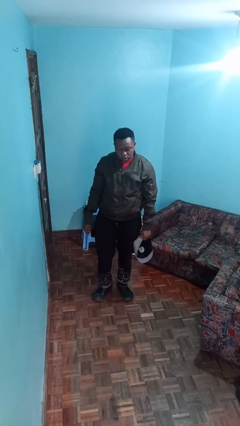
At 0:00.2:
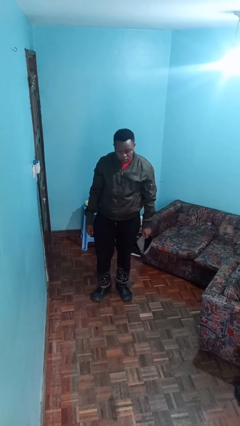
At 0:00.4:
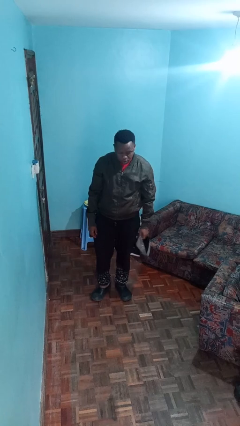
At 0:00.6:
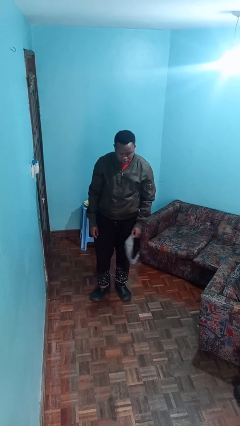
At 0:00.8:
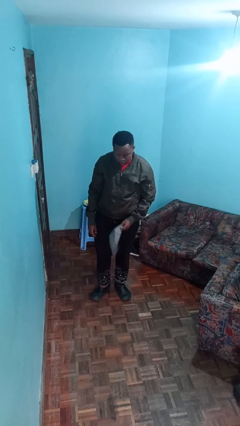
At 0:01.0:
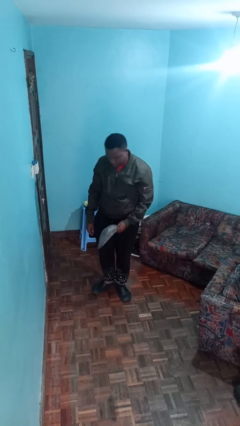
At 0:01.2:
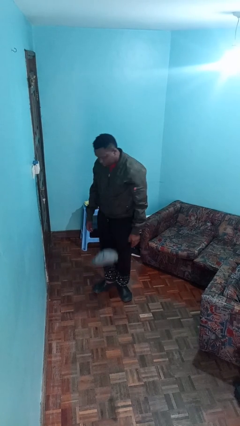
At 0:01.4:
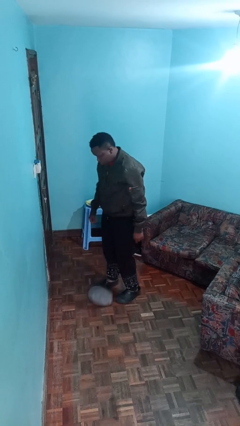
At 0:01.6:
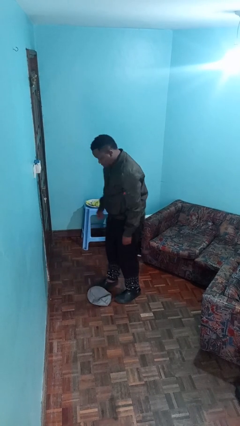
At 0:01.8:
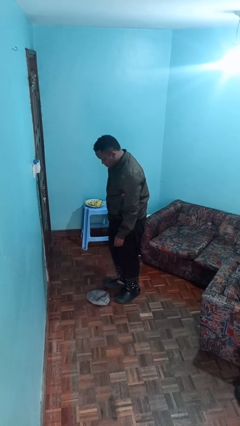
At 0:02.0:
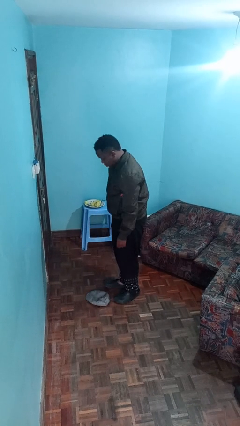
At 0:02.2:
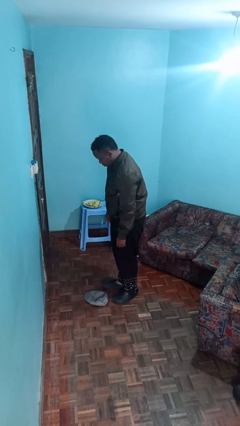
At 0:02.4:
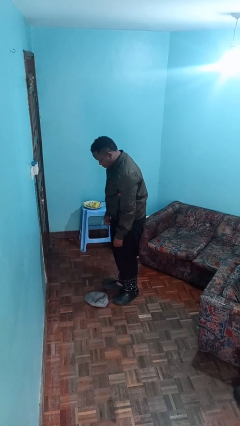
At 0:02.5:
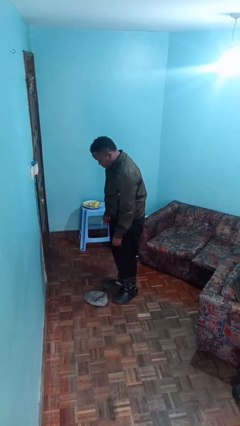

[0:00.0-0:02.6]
person drops object

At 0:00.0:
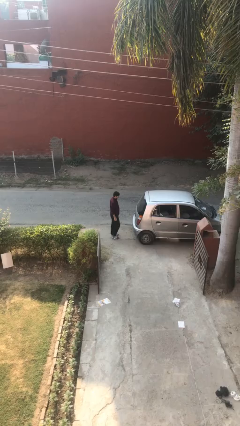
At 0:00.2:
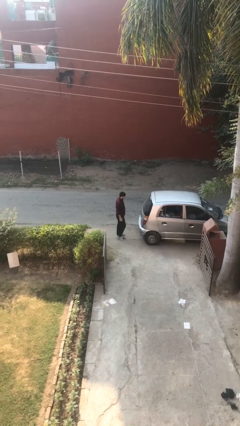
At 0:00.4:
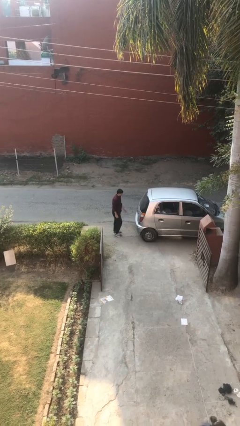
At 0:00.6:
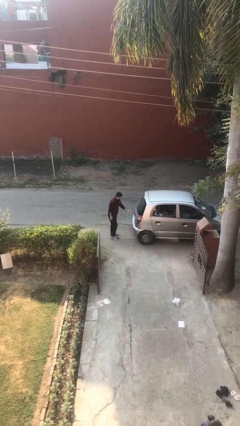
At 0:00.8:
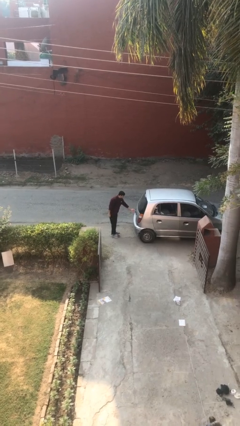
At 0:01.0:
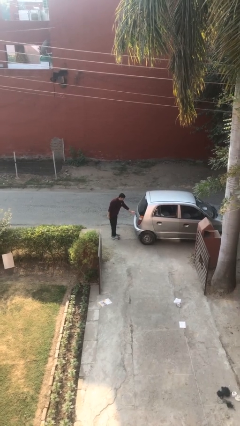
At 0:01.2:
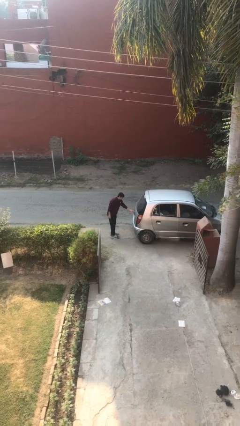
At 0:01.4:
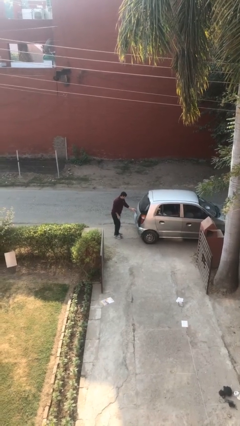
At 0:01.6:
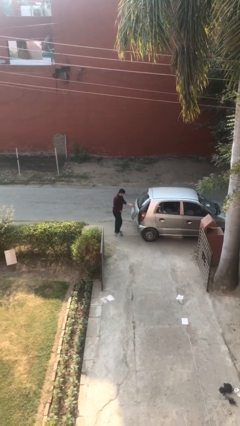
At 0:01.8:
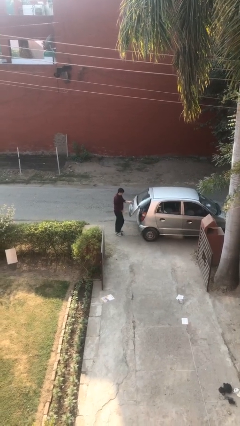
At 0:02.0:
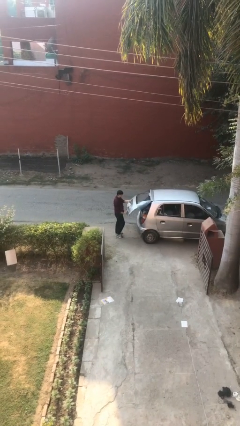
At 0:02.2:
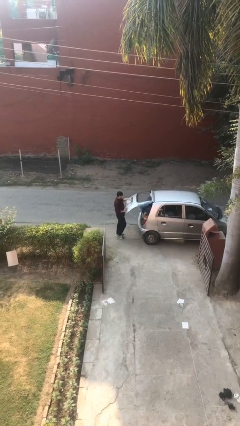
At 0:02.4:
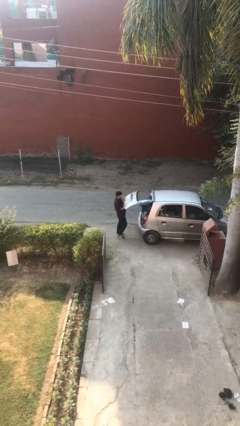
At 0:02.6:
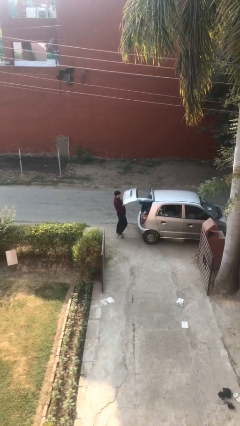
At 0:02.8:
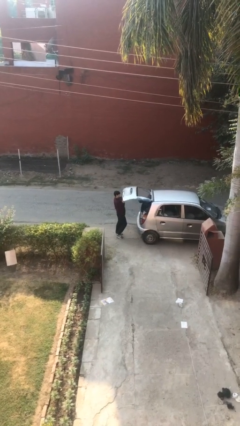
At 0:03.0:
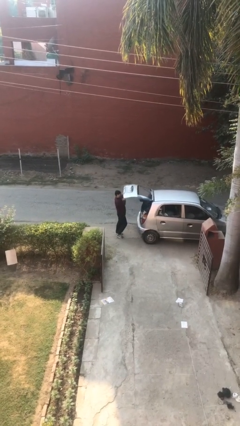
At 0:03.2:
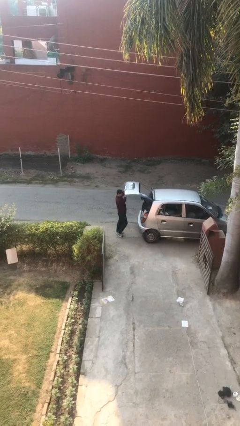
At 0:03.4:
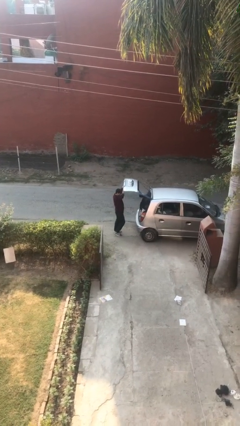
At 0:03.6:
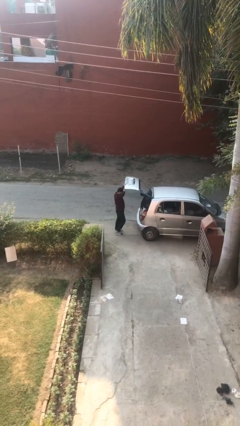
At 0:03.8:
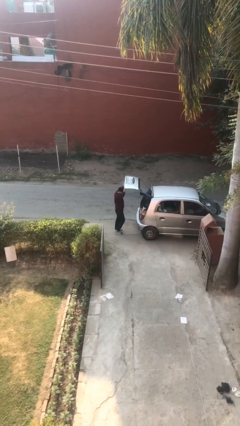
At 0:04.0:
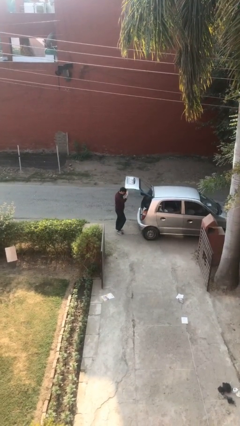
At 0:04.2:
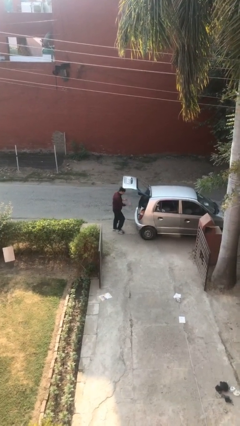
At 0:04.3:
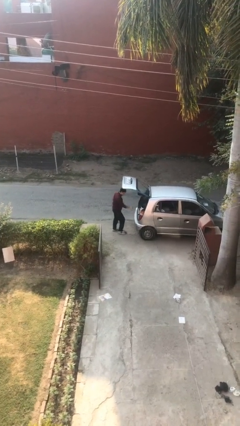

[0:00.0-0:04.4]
person opens car trunk

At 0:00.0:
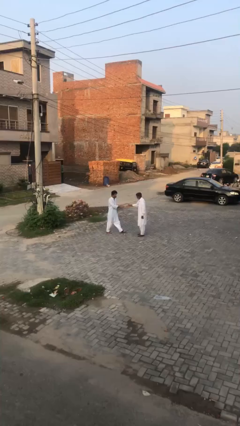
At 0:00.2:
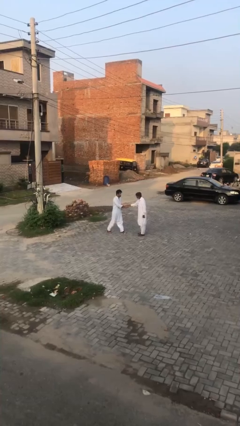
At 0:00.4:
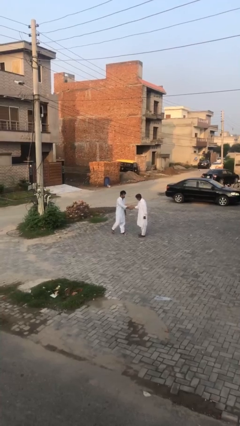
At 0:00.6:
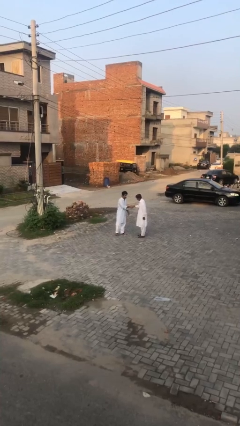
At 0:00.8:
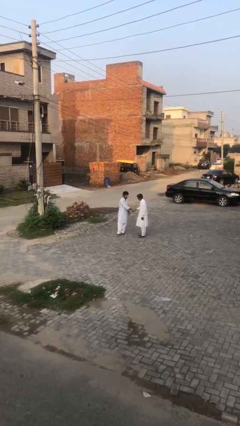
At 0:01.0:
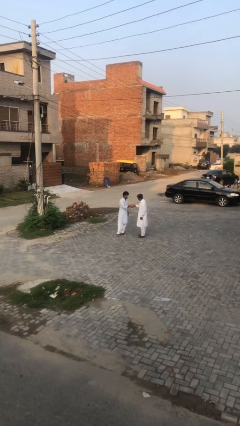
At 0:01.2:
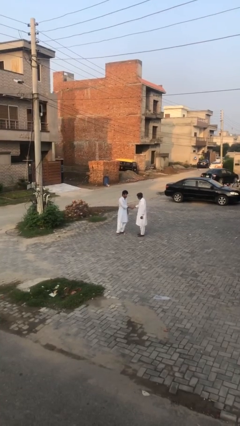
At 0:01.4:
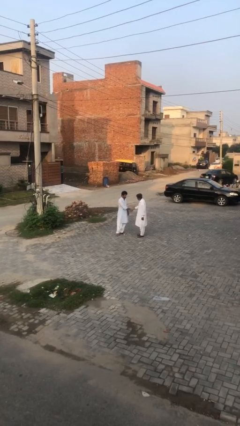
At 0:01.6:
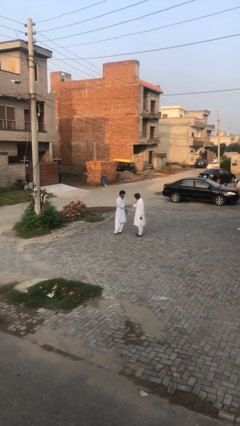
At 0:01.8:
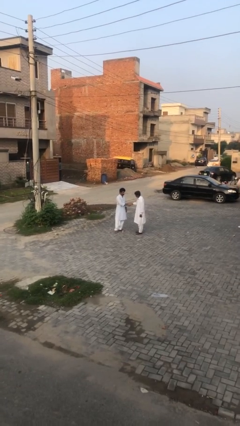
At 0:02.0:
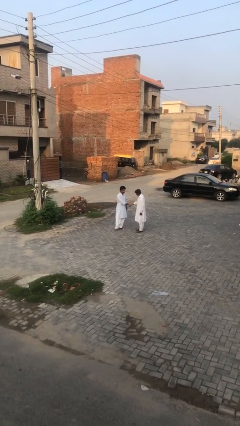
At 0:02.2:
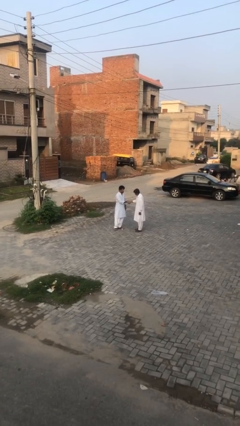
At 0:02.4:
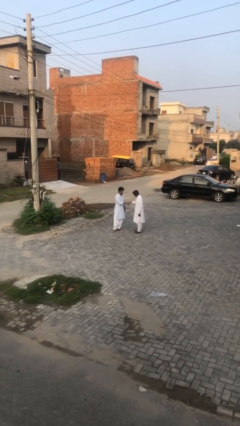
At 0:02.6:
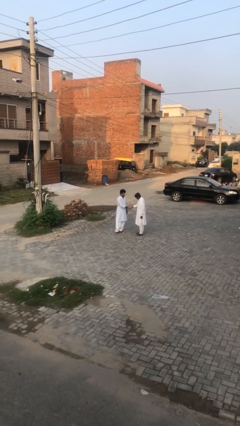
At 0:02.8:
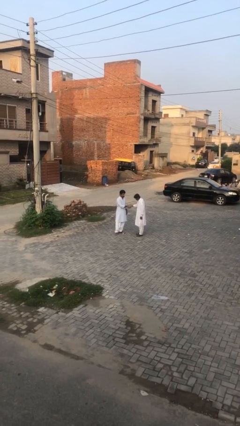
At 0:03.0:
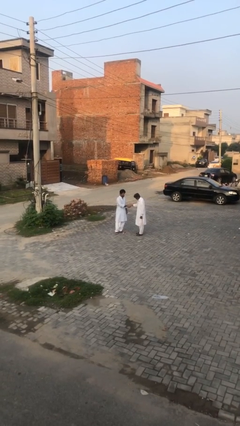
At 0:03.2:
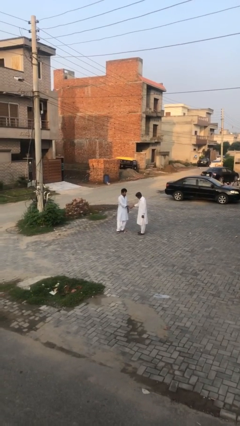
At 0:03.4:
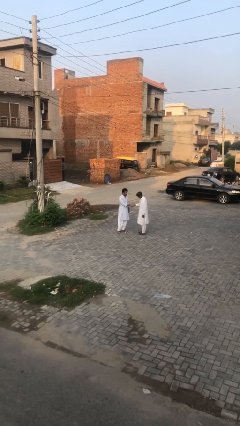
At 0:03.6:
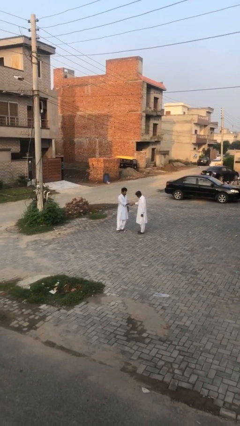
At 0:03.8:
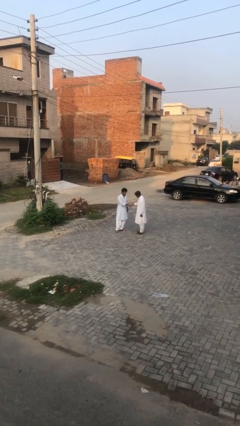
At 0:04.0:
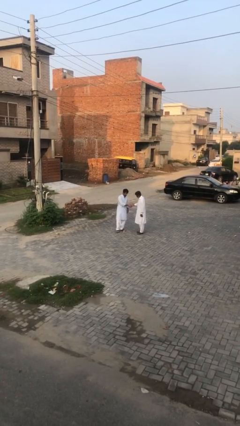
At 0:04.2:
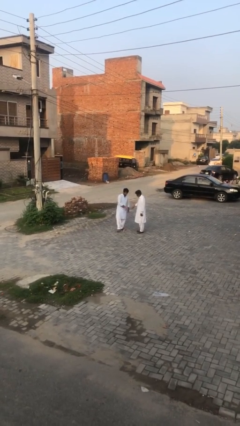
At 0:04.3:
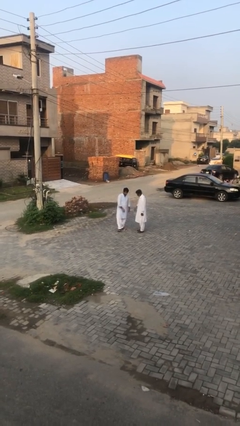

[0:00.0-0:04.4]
person shakes hand

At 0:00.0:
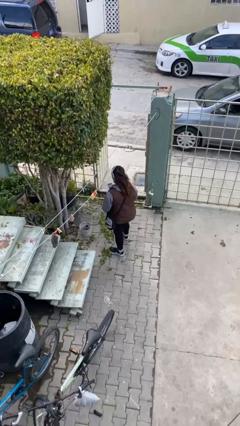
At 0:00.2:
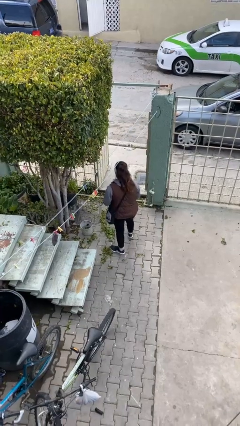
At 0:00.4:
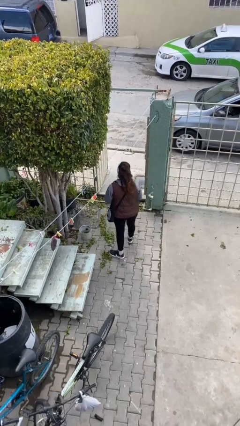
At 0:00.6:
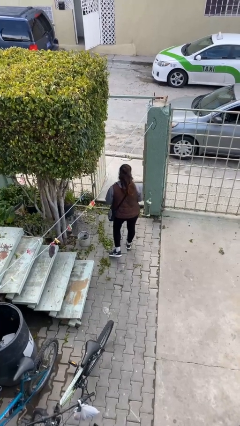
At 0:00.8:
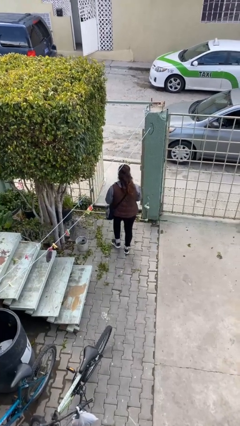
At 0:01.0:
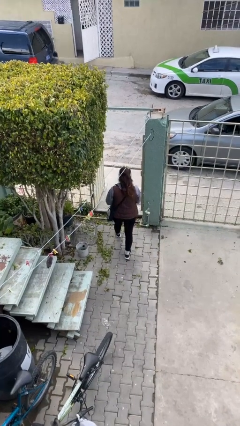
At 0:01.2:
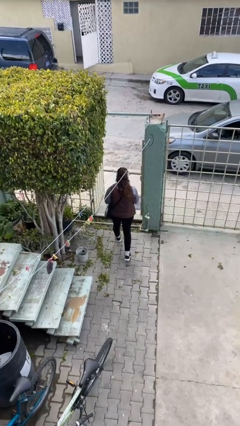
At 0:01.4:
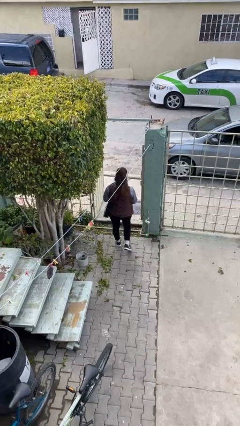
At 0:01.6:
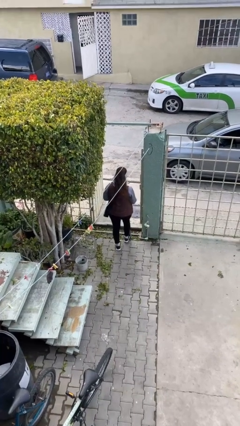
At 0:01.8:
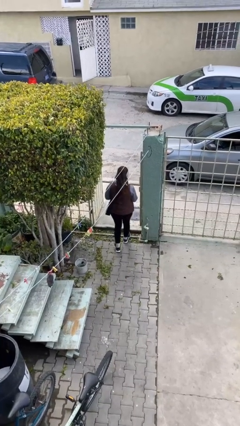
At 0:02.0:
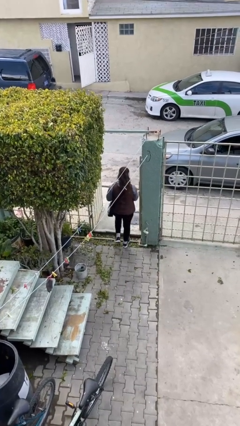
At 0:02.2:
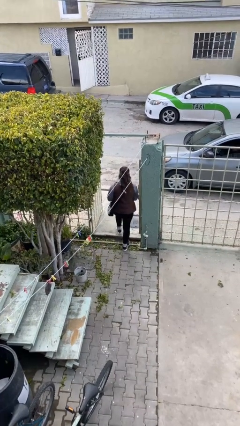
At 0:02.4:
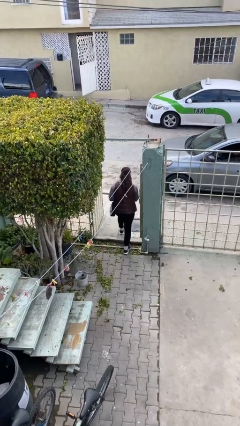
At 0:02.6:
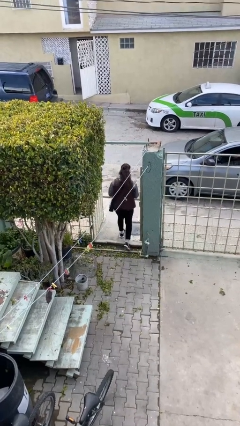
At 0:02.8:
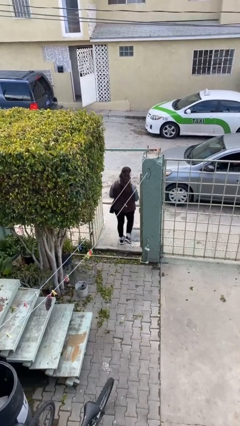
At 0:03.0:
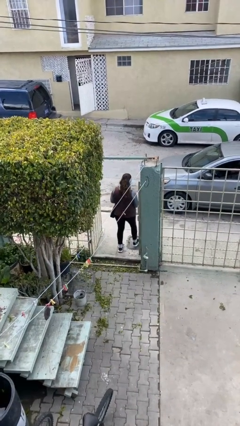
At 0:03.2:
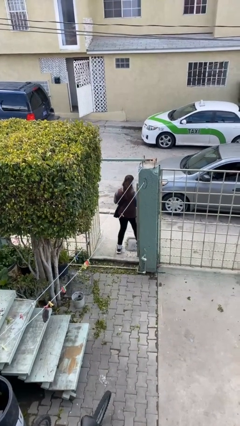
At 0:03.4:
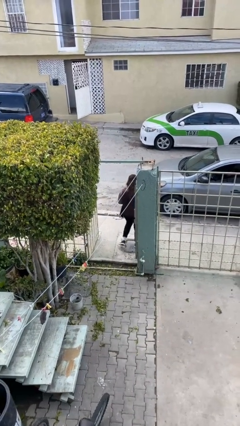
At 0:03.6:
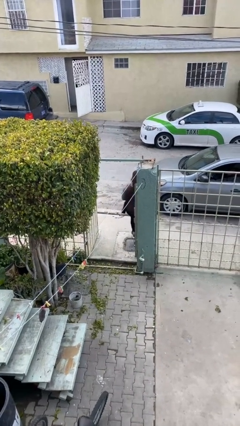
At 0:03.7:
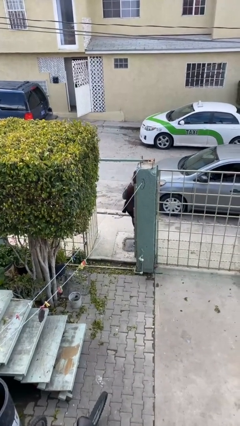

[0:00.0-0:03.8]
person exits scene through structure

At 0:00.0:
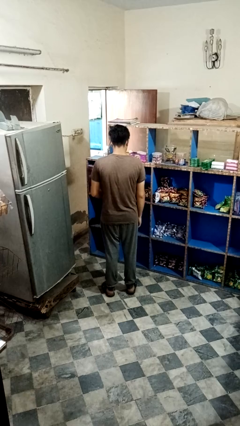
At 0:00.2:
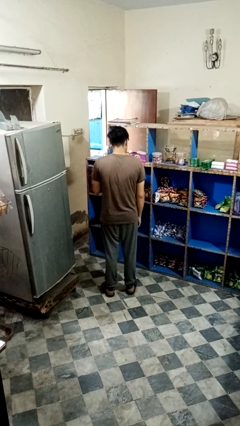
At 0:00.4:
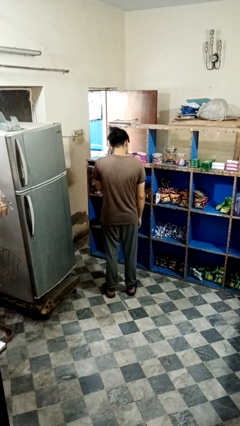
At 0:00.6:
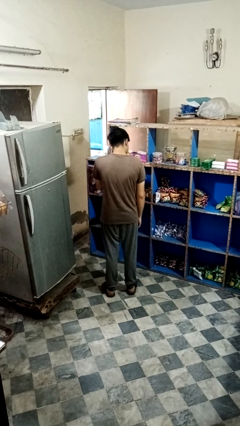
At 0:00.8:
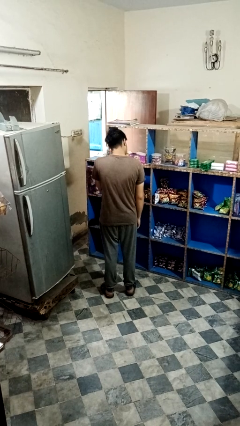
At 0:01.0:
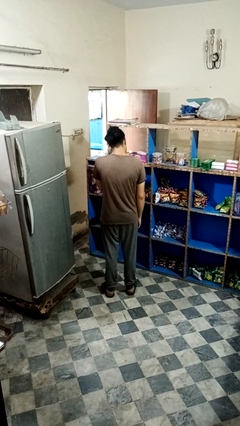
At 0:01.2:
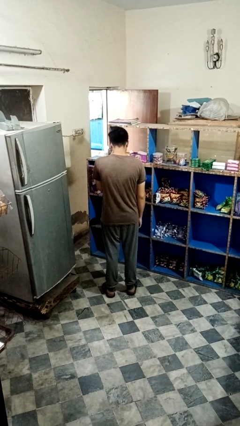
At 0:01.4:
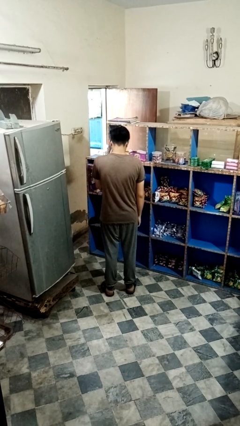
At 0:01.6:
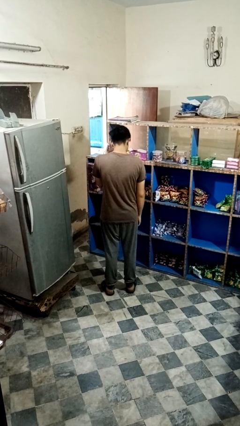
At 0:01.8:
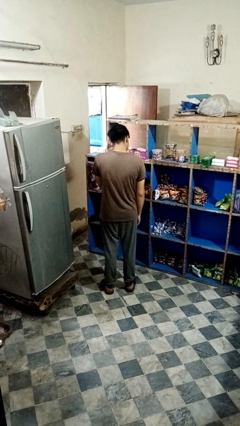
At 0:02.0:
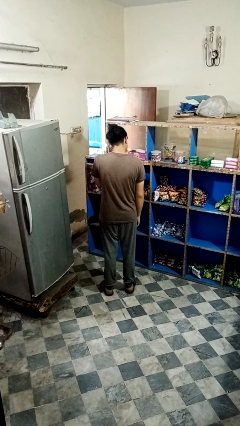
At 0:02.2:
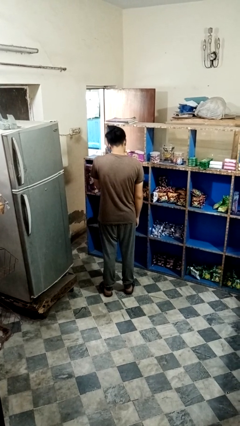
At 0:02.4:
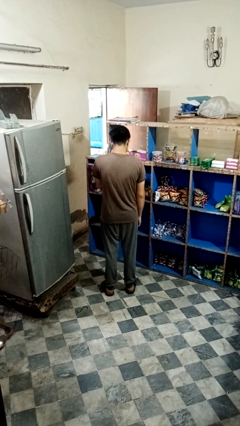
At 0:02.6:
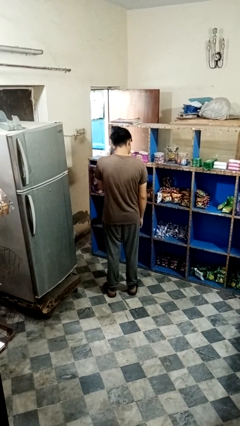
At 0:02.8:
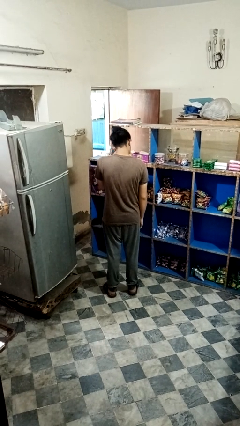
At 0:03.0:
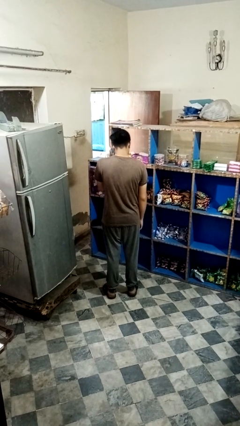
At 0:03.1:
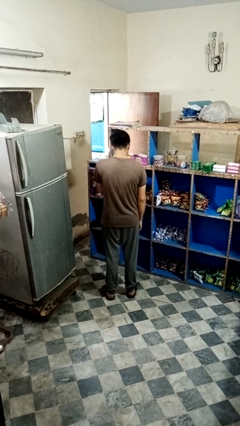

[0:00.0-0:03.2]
person rubs eyes
